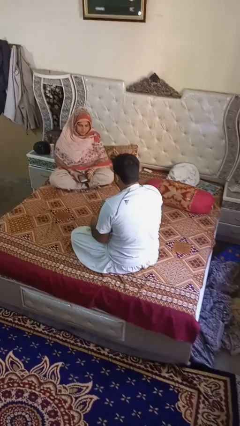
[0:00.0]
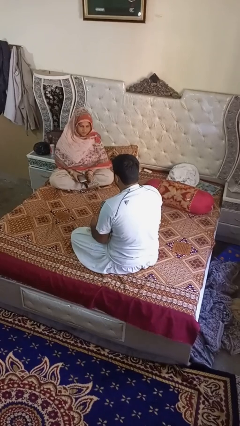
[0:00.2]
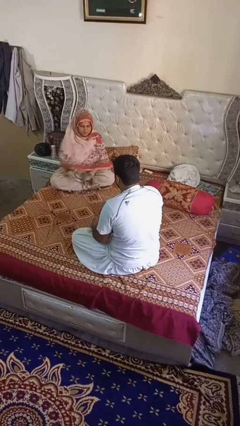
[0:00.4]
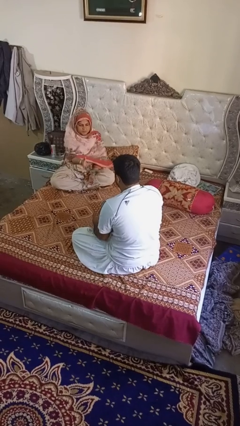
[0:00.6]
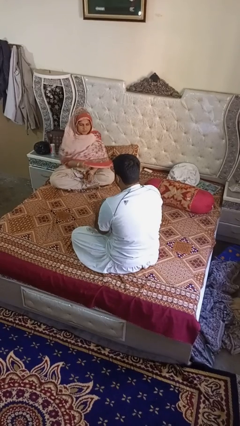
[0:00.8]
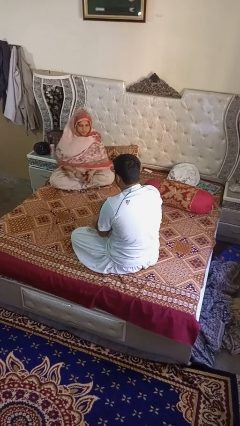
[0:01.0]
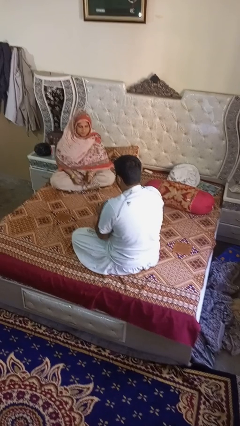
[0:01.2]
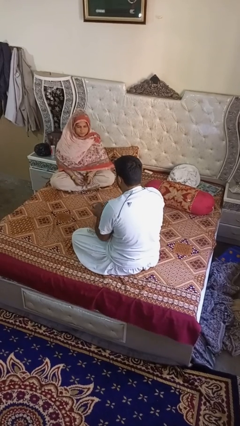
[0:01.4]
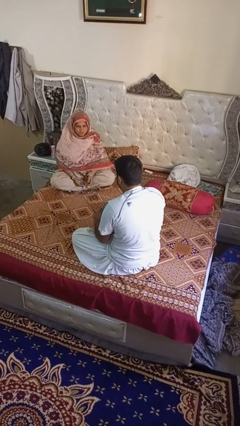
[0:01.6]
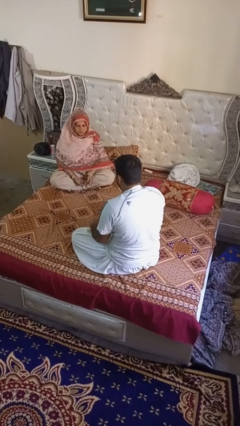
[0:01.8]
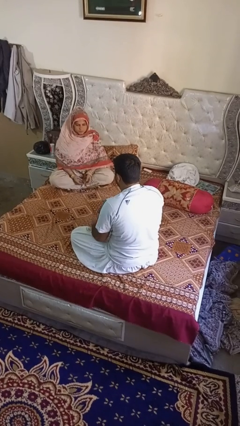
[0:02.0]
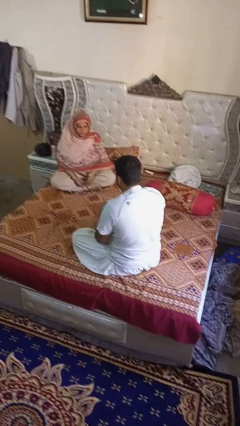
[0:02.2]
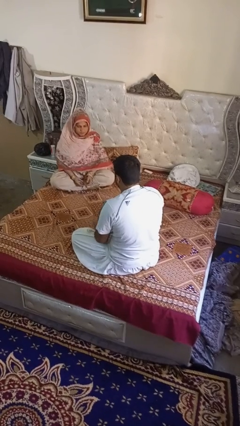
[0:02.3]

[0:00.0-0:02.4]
person catches object from person

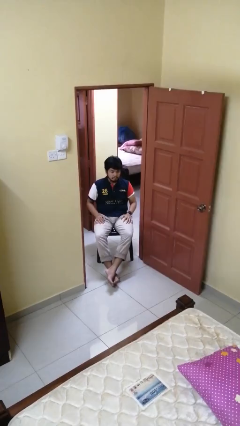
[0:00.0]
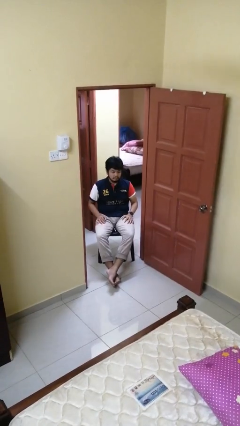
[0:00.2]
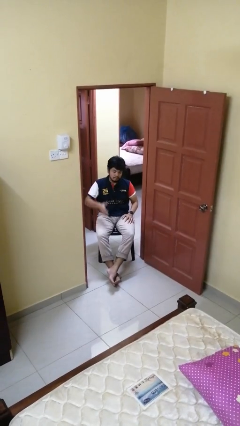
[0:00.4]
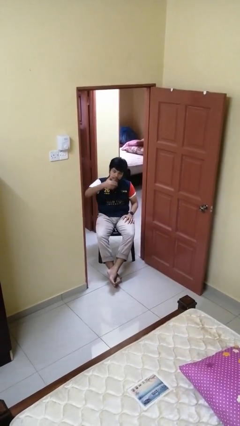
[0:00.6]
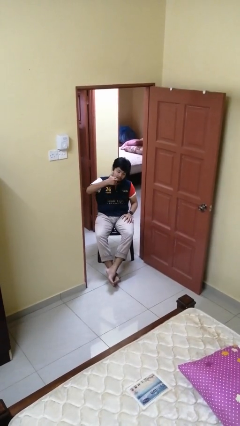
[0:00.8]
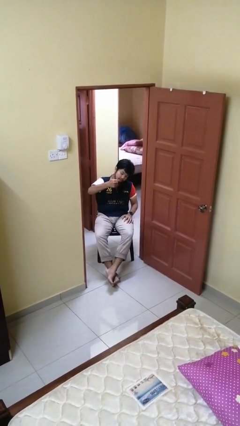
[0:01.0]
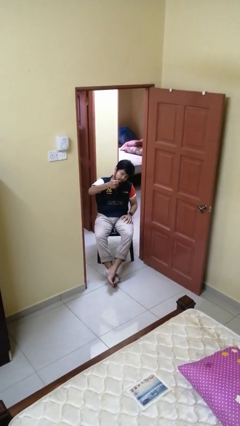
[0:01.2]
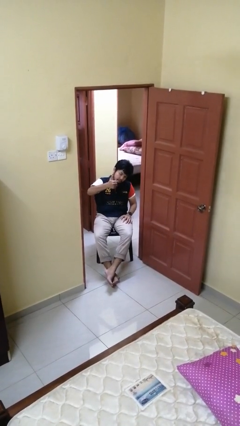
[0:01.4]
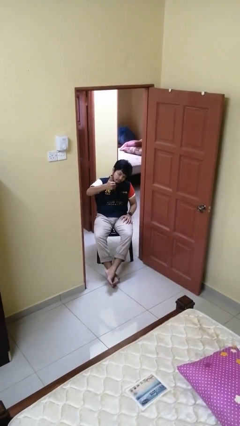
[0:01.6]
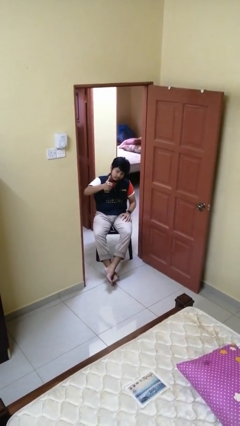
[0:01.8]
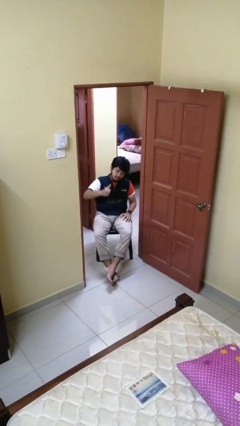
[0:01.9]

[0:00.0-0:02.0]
person gestures thumbs up

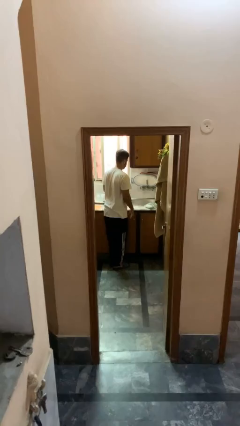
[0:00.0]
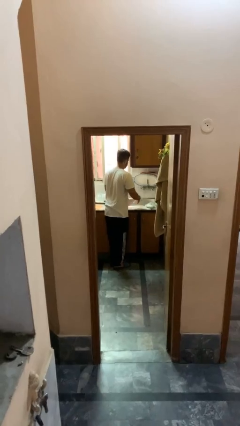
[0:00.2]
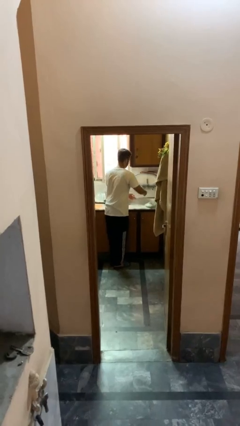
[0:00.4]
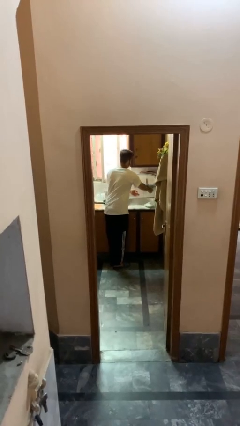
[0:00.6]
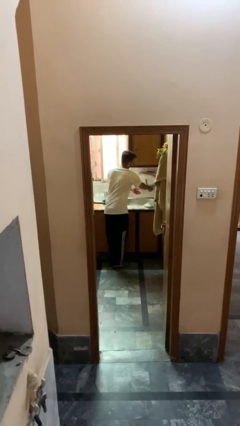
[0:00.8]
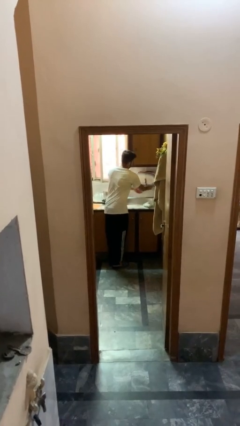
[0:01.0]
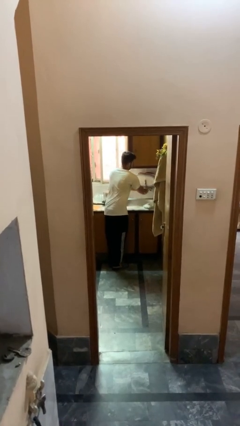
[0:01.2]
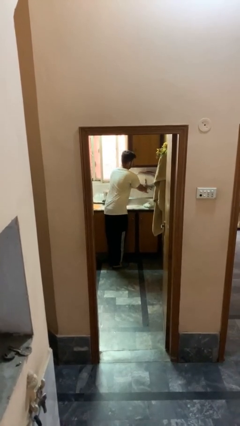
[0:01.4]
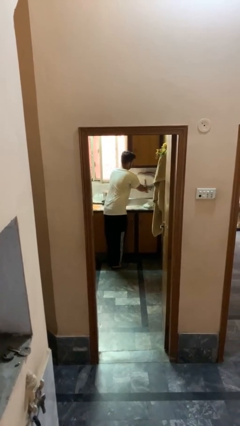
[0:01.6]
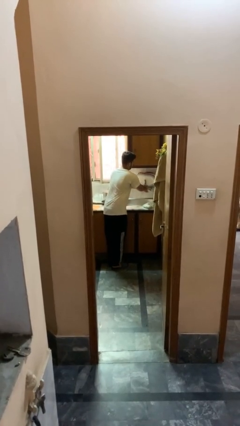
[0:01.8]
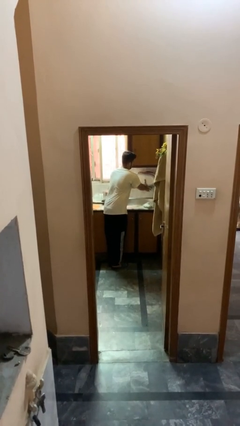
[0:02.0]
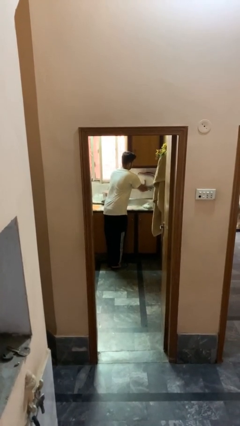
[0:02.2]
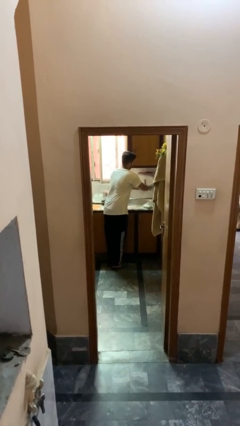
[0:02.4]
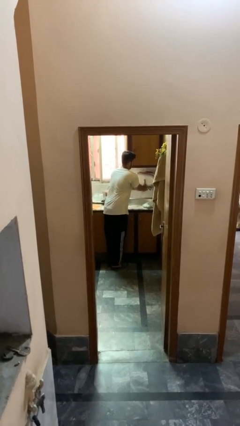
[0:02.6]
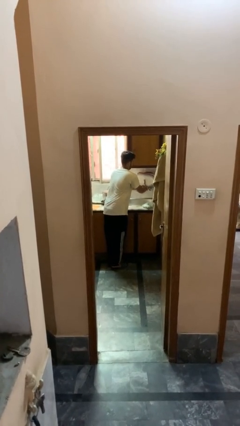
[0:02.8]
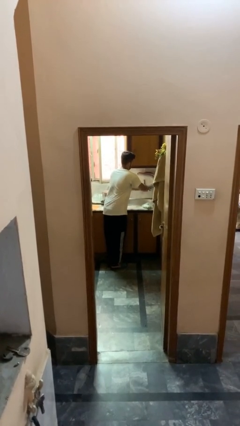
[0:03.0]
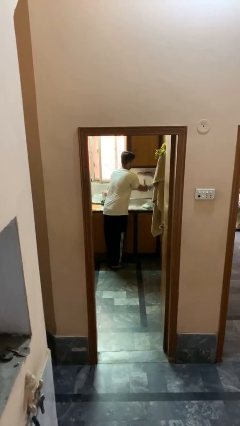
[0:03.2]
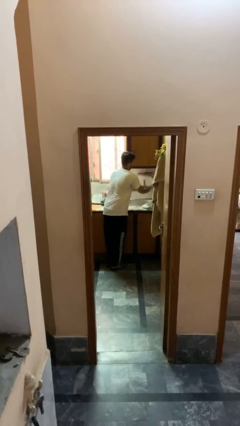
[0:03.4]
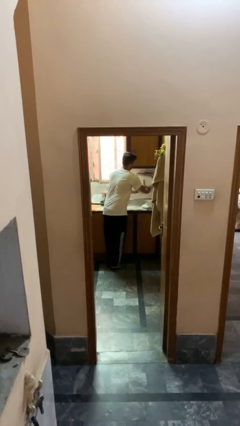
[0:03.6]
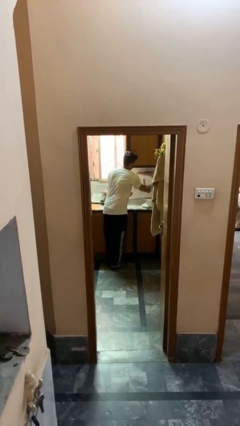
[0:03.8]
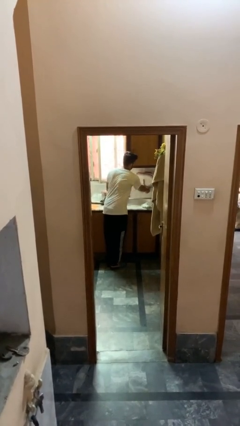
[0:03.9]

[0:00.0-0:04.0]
person washes hands

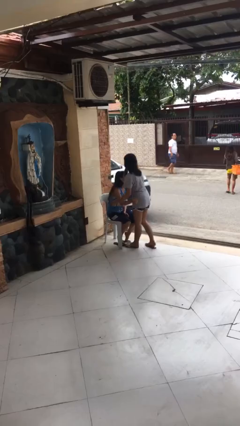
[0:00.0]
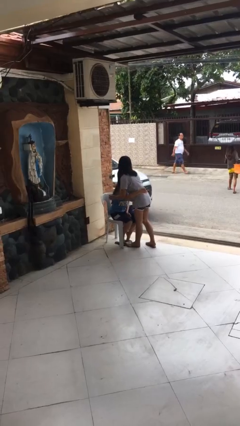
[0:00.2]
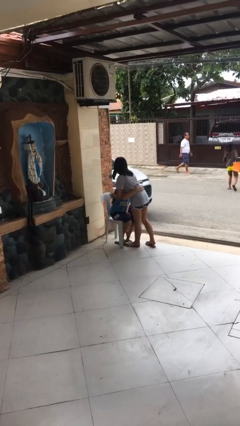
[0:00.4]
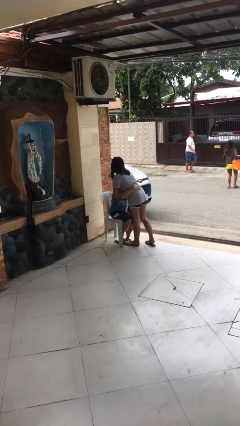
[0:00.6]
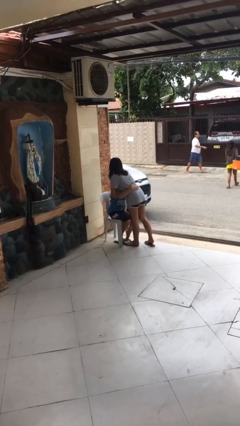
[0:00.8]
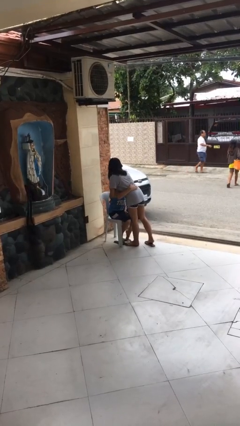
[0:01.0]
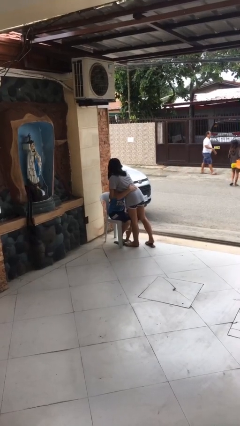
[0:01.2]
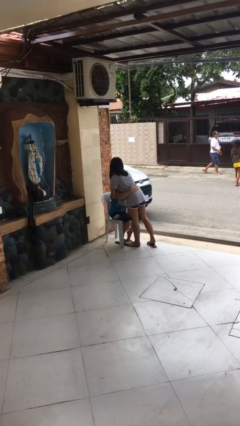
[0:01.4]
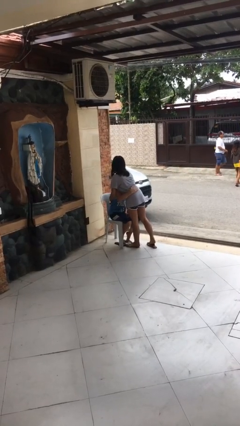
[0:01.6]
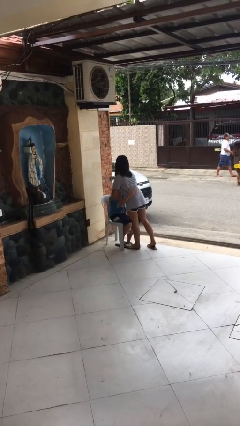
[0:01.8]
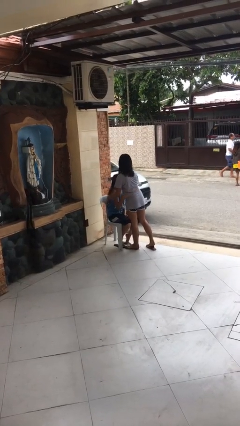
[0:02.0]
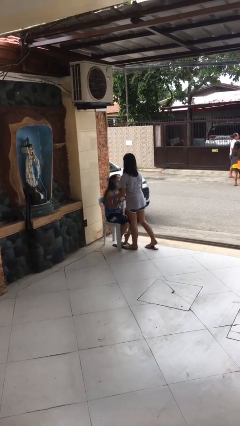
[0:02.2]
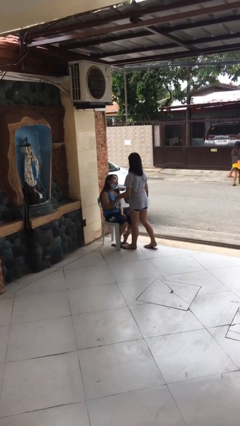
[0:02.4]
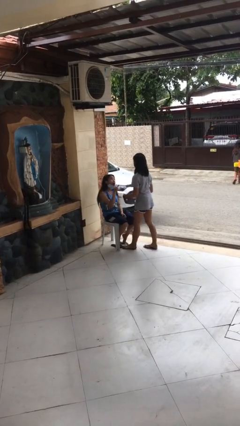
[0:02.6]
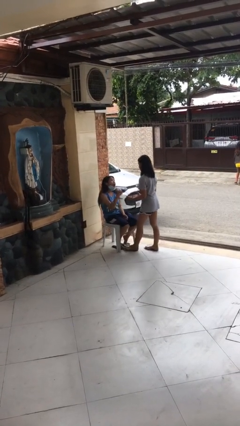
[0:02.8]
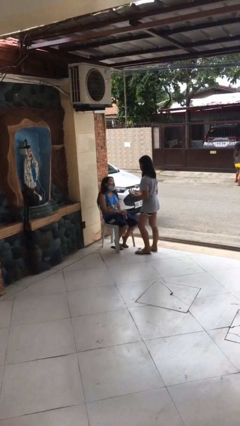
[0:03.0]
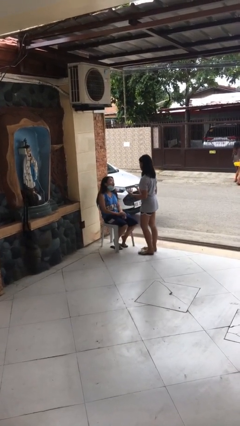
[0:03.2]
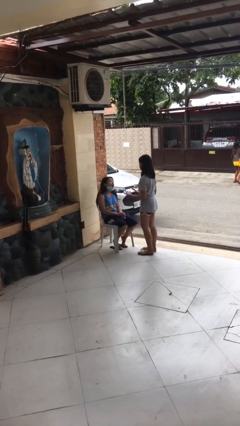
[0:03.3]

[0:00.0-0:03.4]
person embraces person

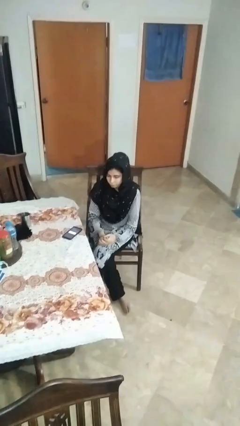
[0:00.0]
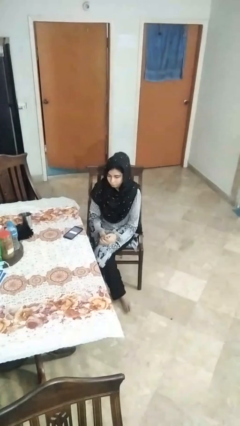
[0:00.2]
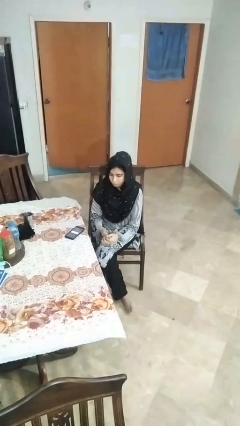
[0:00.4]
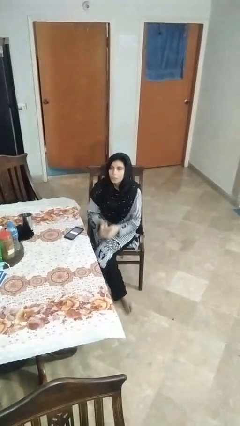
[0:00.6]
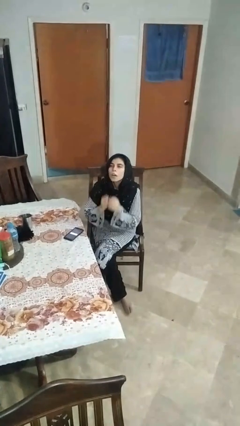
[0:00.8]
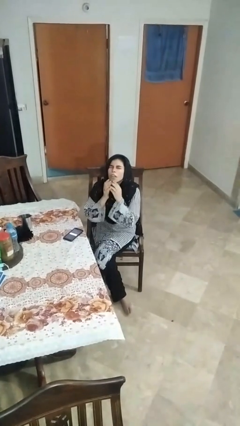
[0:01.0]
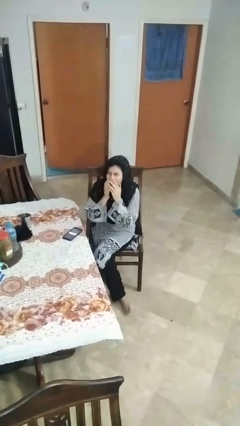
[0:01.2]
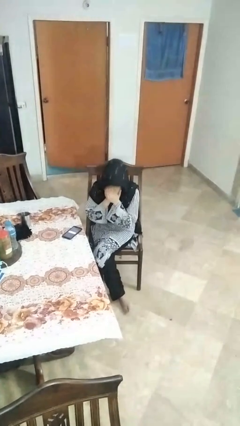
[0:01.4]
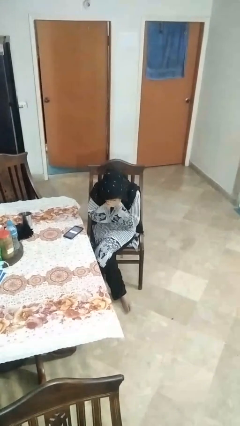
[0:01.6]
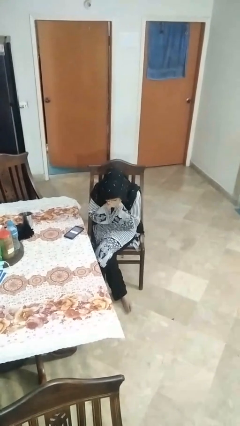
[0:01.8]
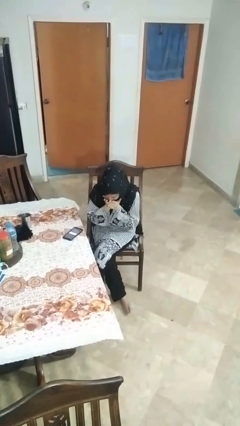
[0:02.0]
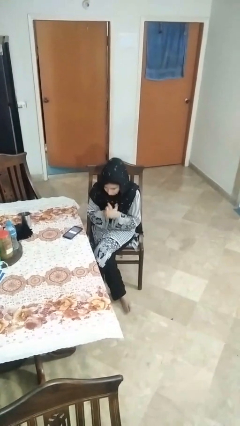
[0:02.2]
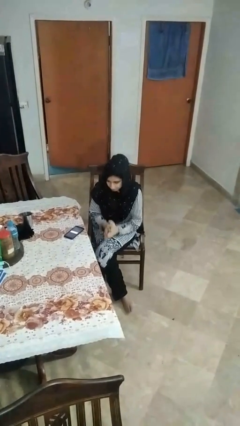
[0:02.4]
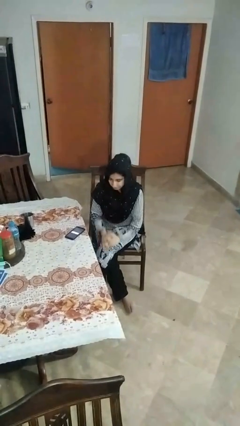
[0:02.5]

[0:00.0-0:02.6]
person sneezes into hand

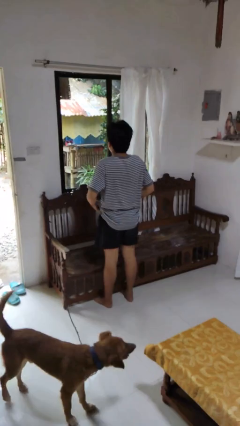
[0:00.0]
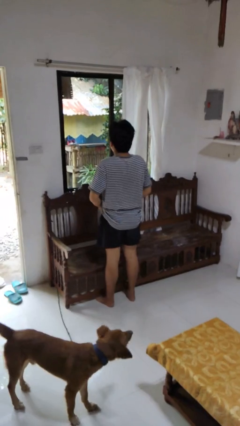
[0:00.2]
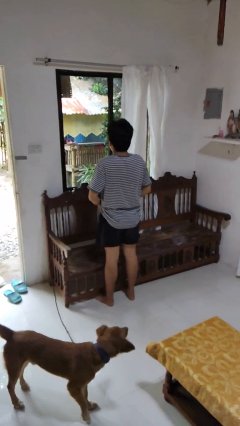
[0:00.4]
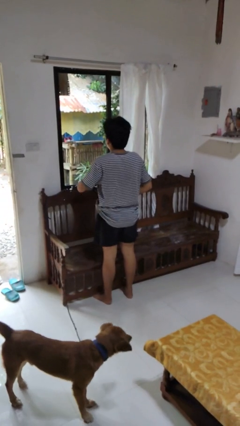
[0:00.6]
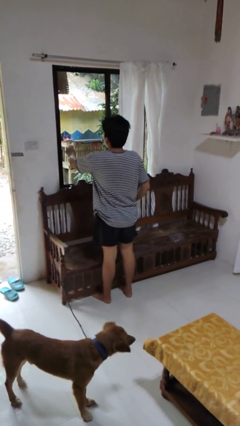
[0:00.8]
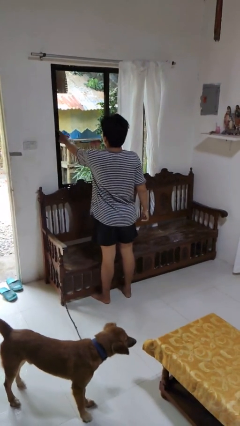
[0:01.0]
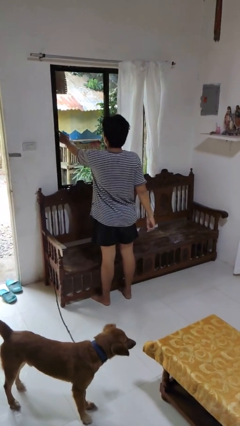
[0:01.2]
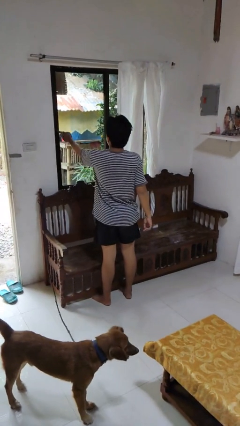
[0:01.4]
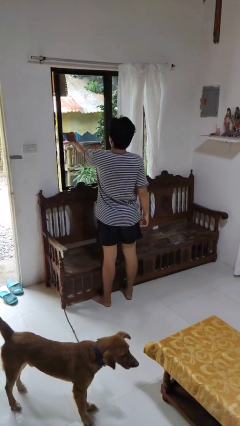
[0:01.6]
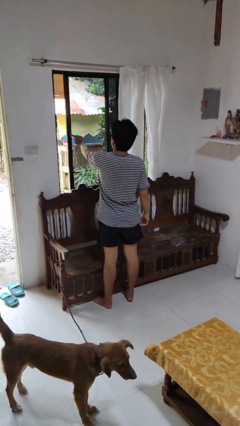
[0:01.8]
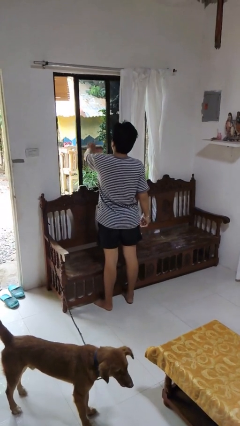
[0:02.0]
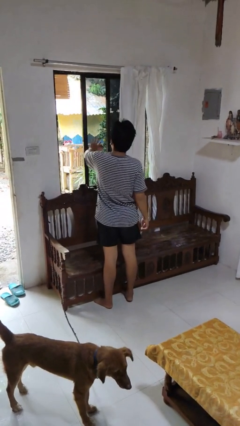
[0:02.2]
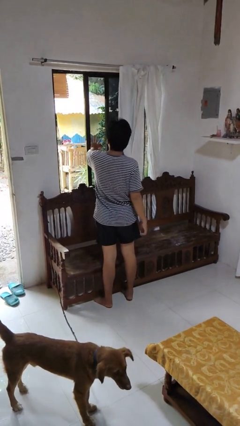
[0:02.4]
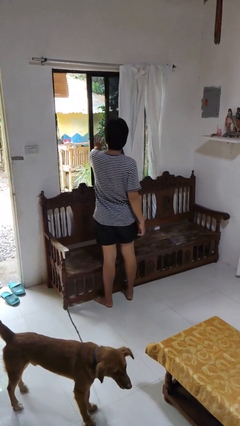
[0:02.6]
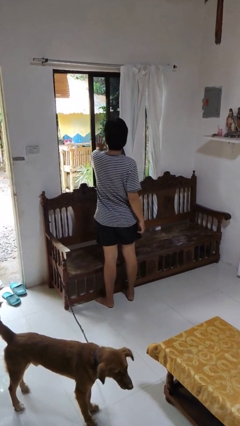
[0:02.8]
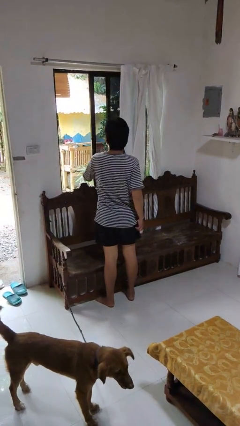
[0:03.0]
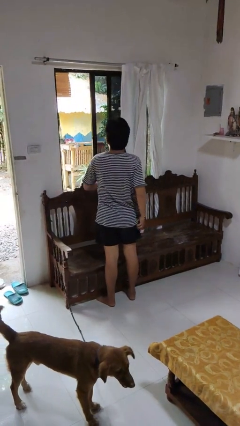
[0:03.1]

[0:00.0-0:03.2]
person opens home window
